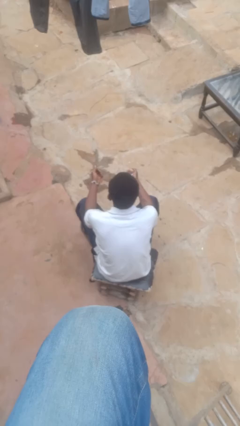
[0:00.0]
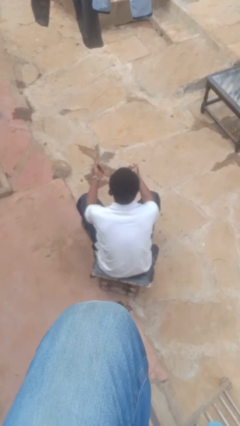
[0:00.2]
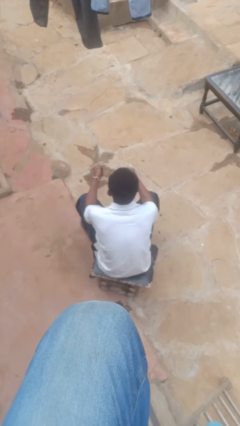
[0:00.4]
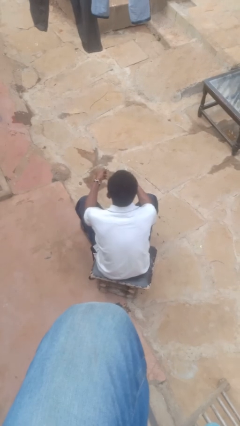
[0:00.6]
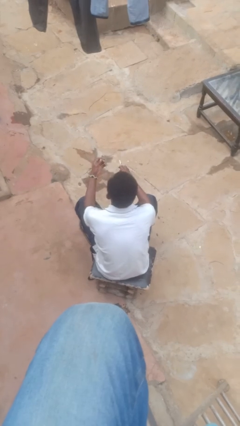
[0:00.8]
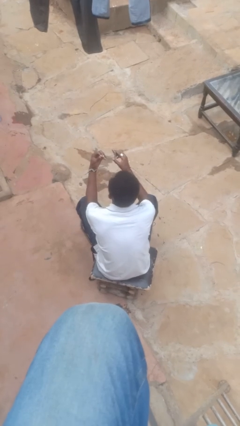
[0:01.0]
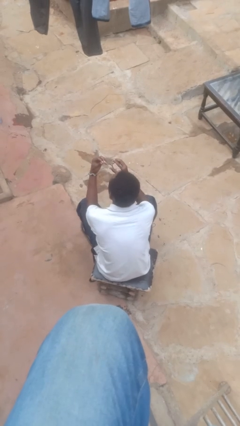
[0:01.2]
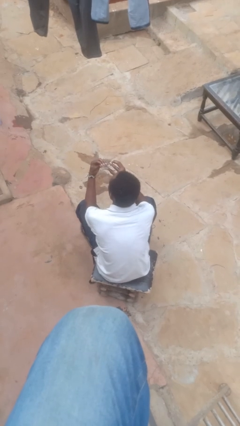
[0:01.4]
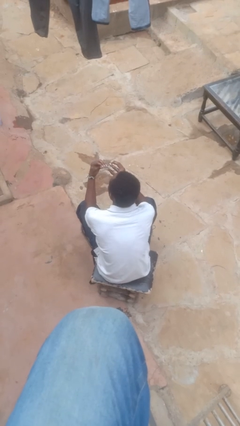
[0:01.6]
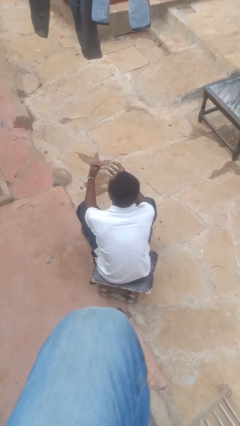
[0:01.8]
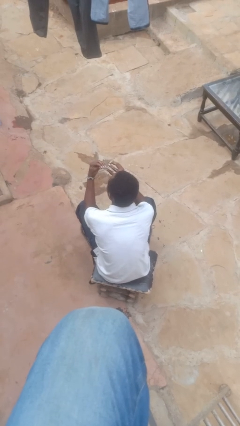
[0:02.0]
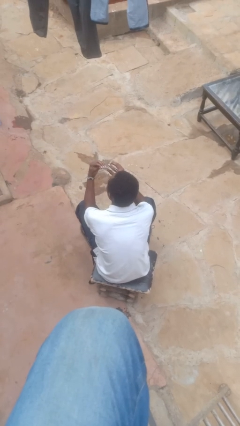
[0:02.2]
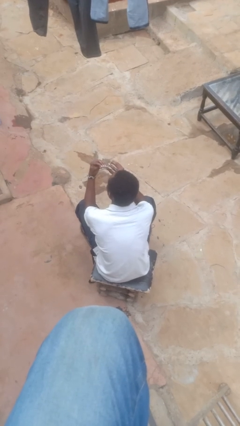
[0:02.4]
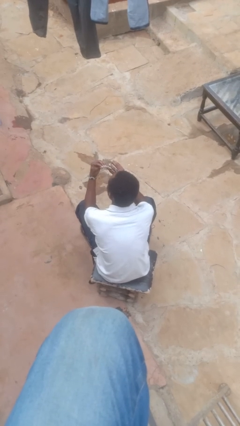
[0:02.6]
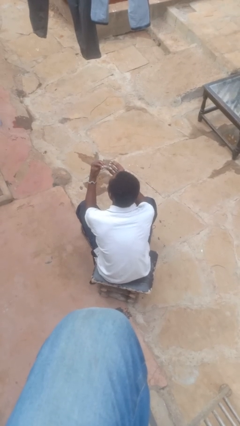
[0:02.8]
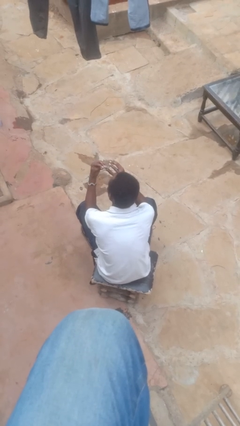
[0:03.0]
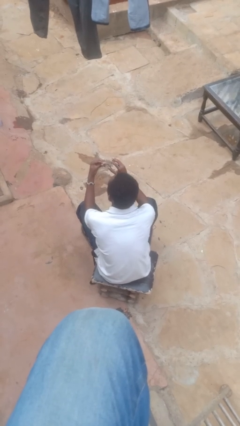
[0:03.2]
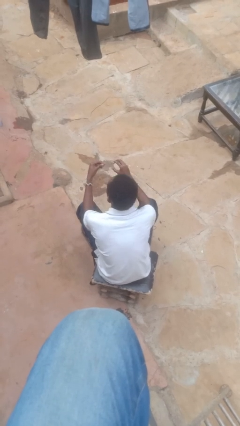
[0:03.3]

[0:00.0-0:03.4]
person clips fingernails

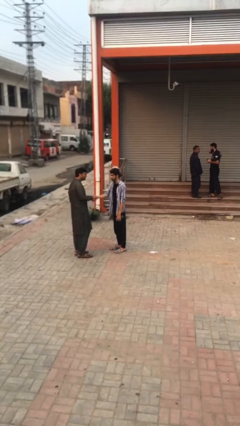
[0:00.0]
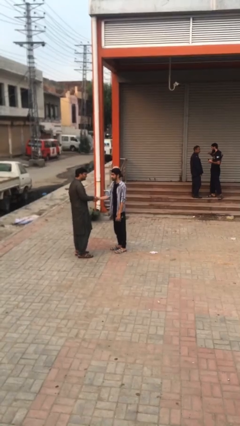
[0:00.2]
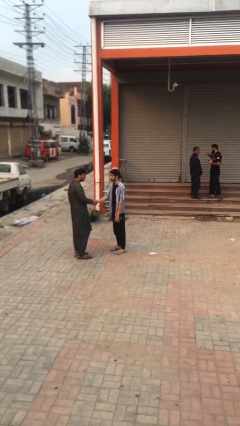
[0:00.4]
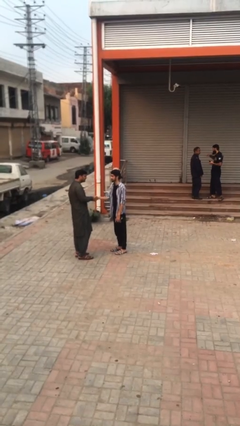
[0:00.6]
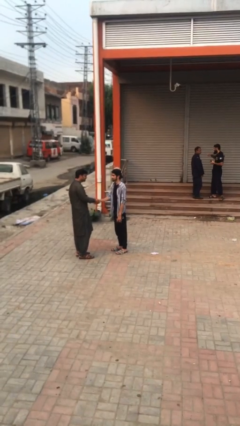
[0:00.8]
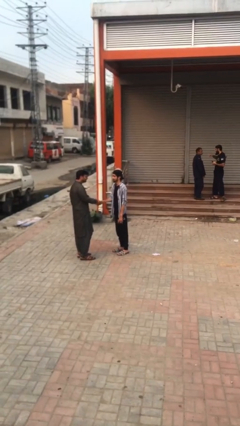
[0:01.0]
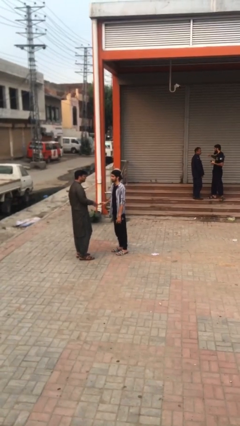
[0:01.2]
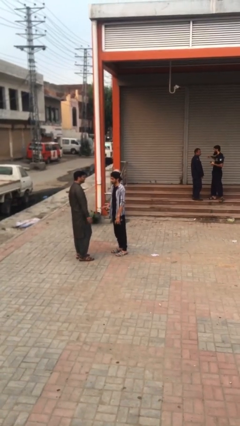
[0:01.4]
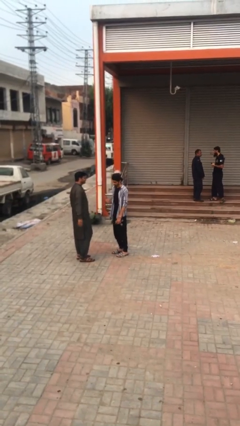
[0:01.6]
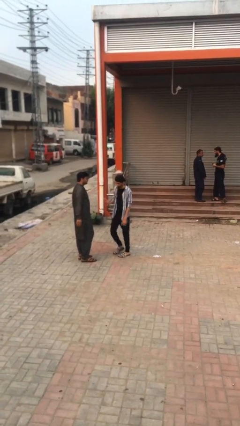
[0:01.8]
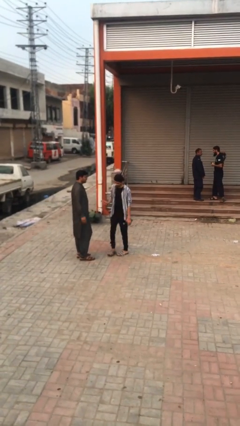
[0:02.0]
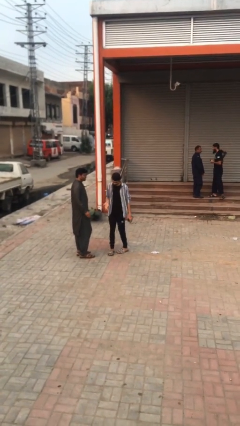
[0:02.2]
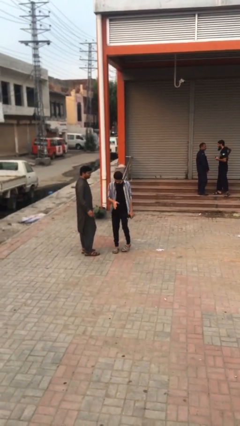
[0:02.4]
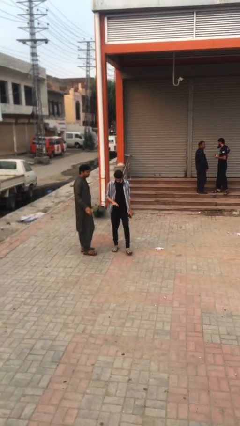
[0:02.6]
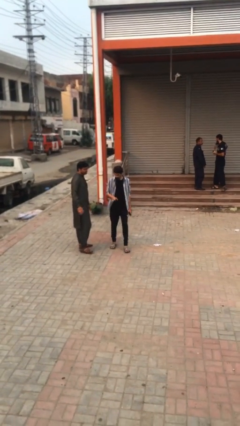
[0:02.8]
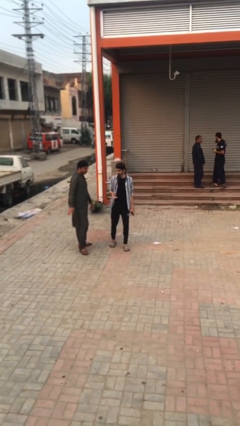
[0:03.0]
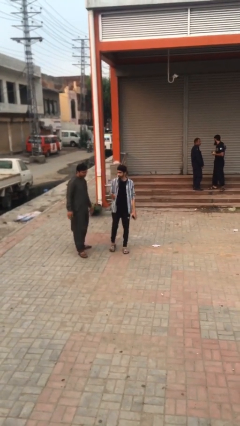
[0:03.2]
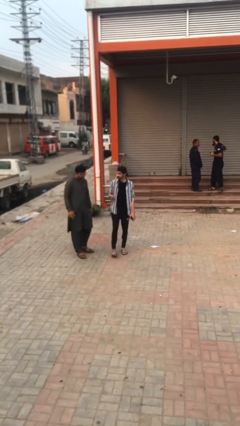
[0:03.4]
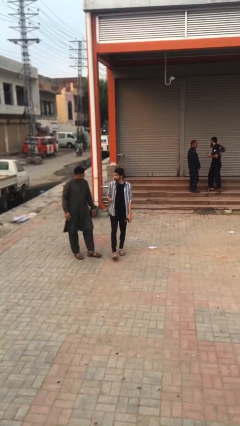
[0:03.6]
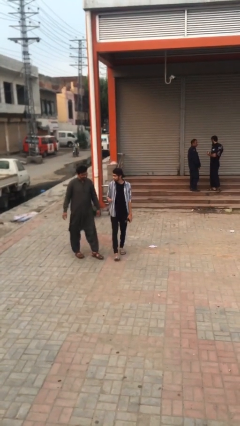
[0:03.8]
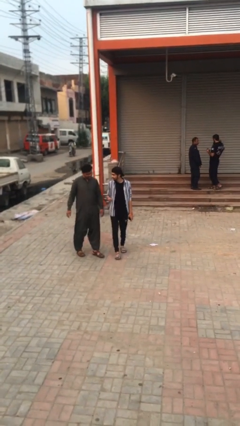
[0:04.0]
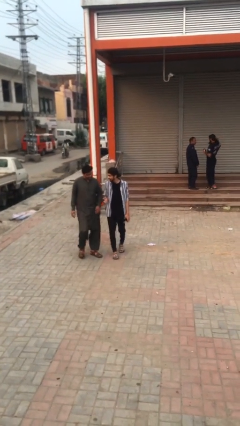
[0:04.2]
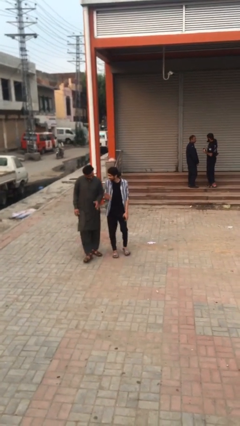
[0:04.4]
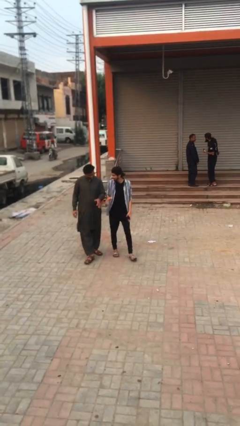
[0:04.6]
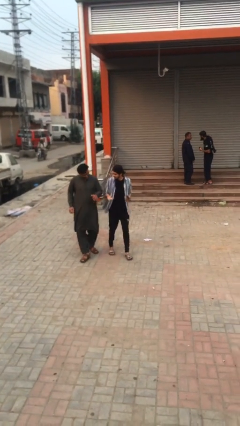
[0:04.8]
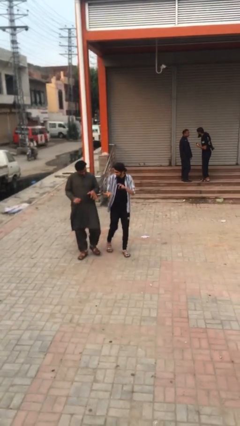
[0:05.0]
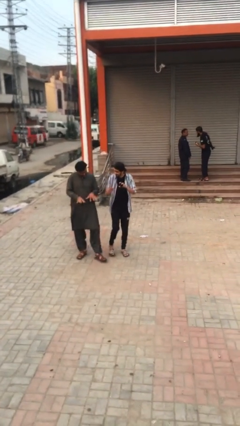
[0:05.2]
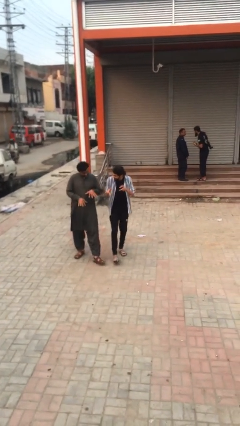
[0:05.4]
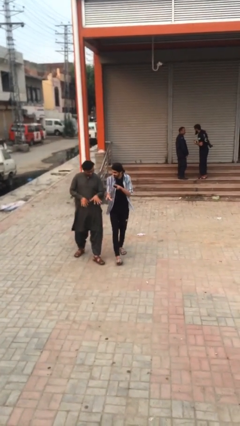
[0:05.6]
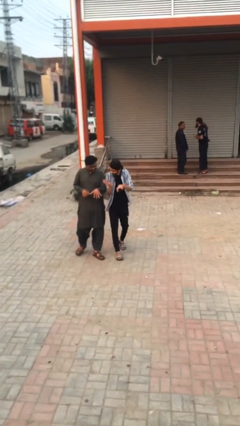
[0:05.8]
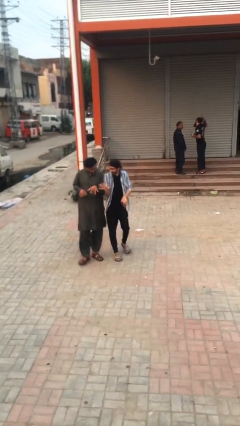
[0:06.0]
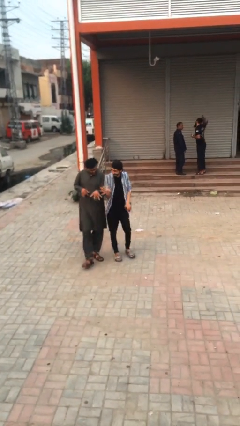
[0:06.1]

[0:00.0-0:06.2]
person talks to person

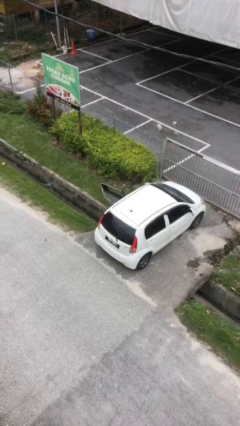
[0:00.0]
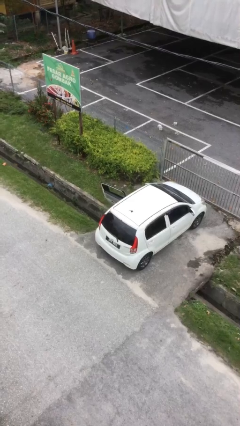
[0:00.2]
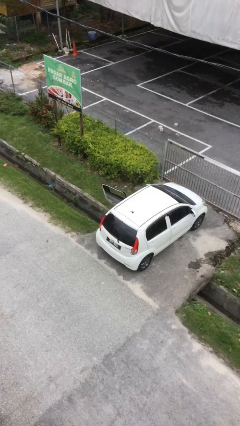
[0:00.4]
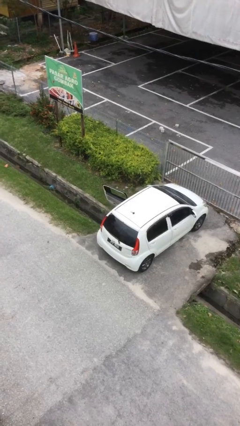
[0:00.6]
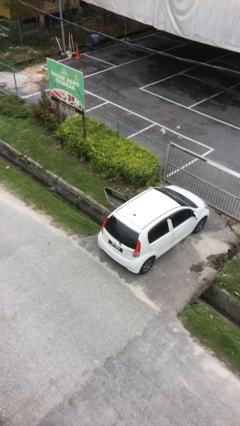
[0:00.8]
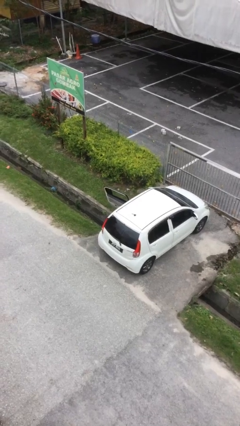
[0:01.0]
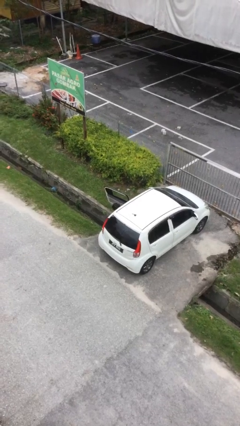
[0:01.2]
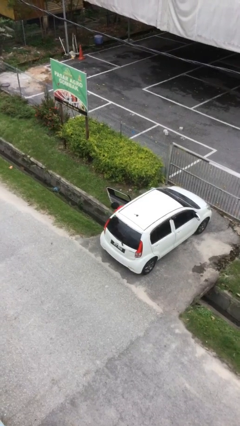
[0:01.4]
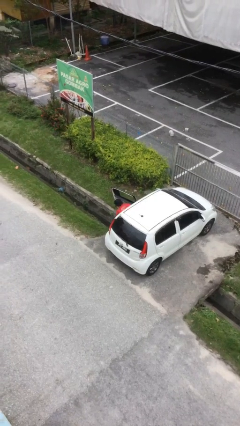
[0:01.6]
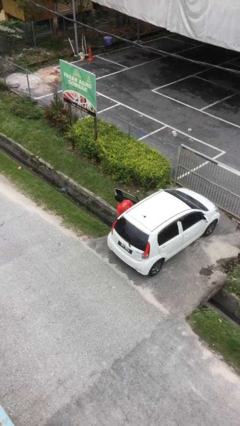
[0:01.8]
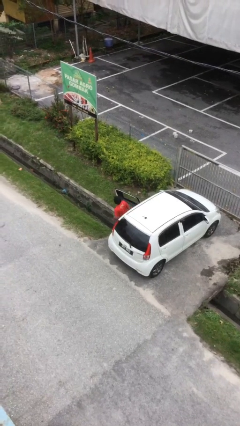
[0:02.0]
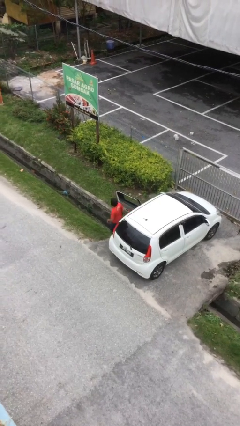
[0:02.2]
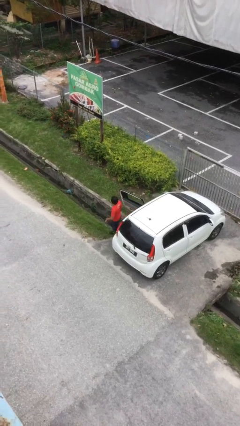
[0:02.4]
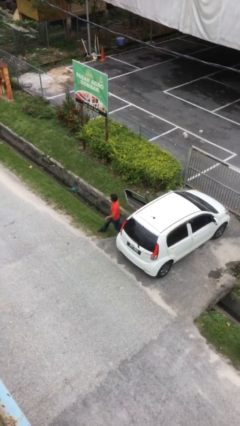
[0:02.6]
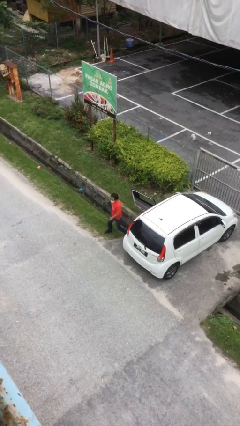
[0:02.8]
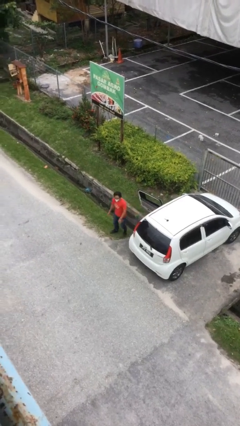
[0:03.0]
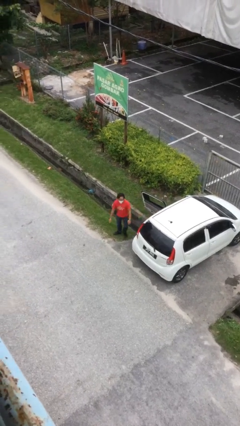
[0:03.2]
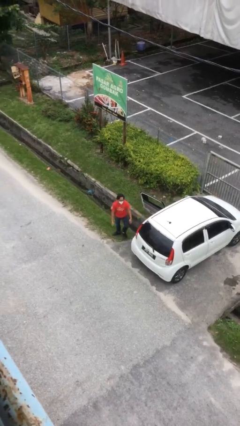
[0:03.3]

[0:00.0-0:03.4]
person exits car

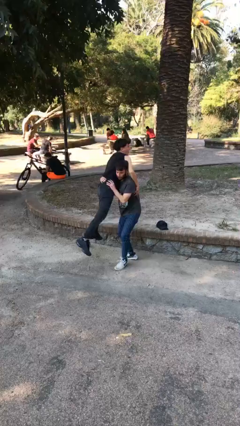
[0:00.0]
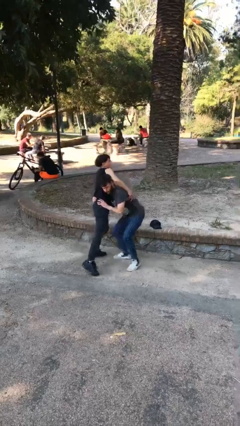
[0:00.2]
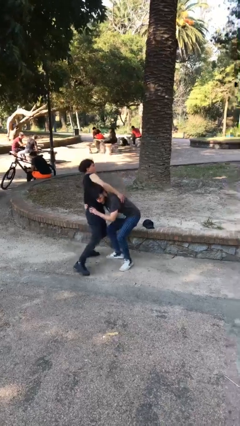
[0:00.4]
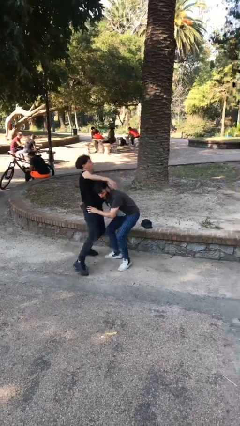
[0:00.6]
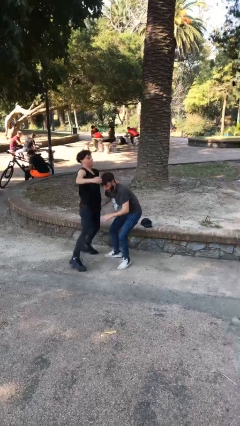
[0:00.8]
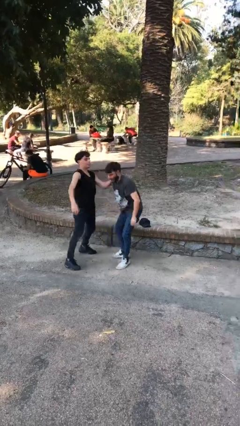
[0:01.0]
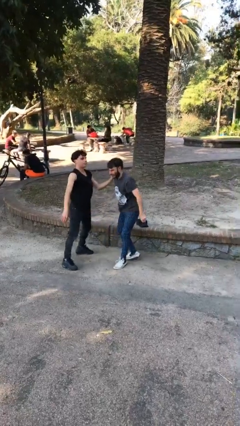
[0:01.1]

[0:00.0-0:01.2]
person puts down person

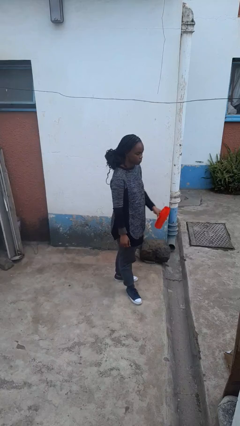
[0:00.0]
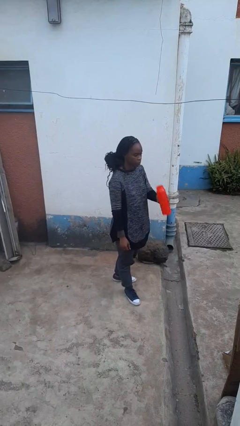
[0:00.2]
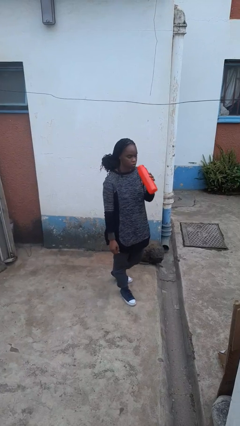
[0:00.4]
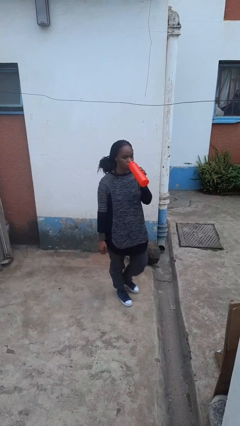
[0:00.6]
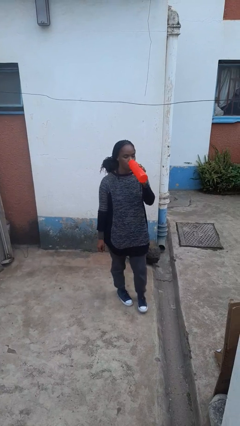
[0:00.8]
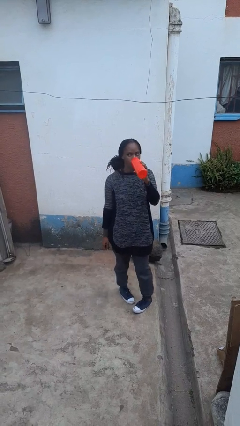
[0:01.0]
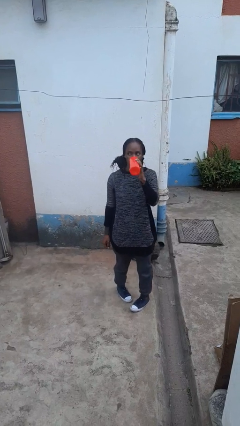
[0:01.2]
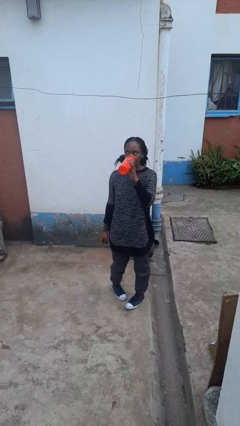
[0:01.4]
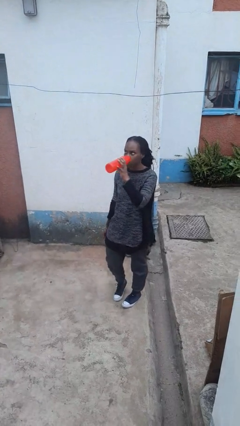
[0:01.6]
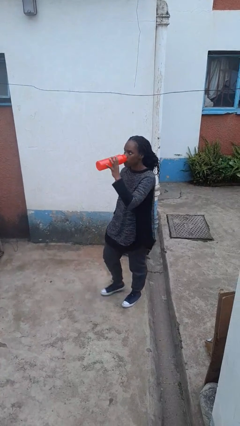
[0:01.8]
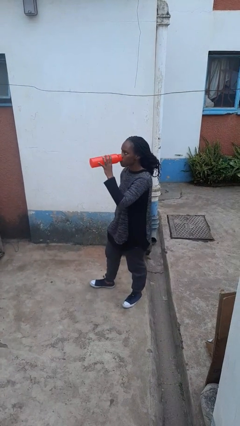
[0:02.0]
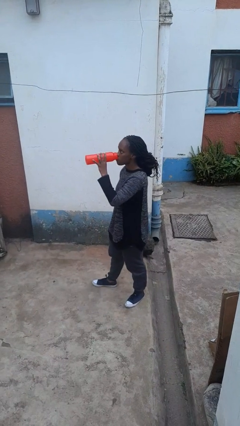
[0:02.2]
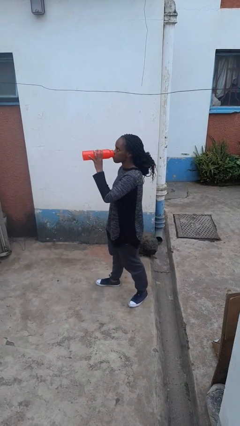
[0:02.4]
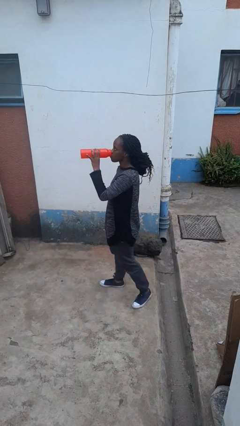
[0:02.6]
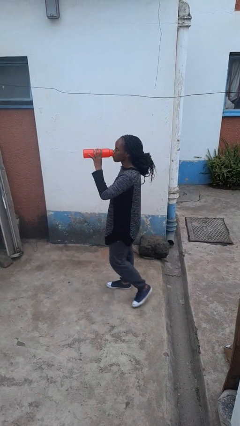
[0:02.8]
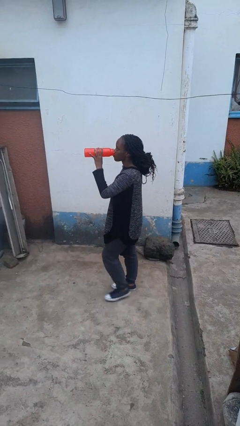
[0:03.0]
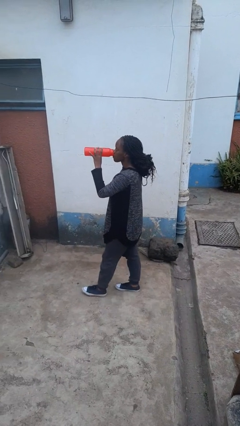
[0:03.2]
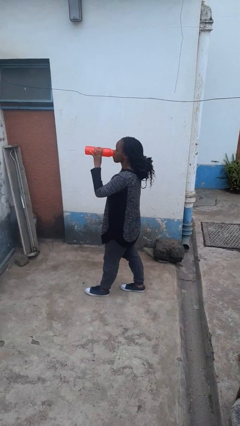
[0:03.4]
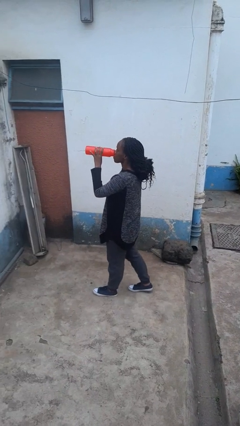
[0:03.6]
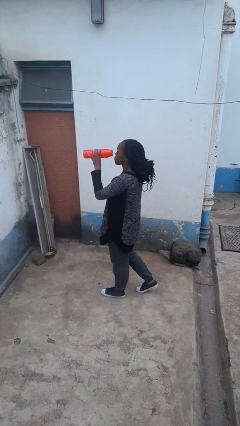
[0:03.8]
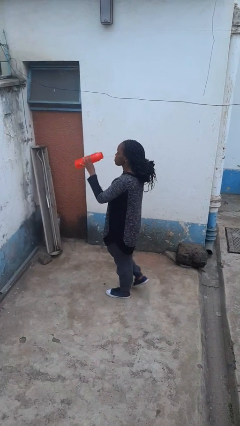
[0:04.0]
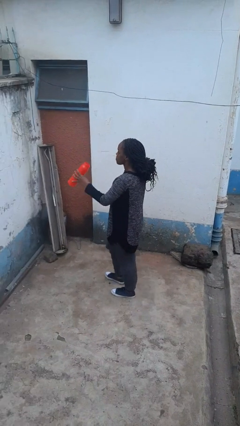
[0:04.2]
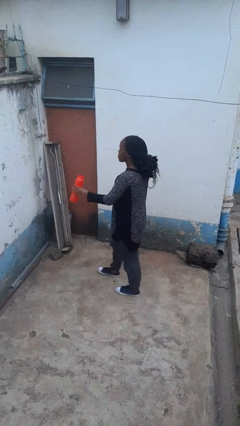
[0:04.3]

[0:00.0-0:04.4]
person drinks from bottle
